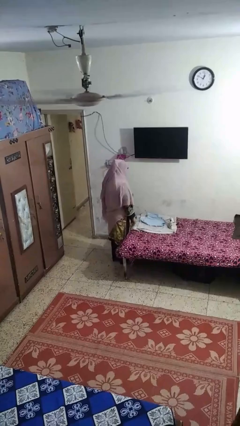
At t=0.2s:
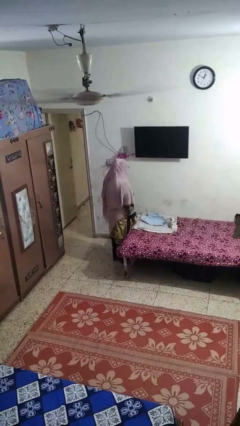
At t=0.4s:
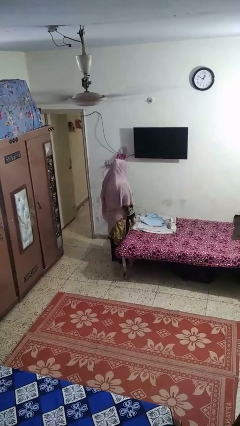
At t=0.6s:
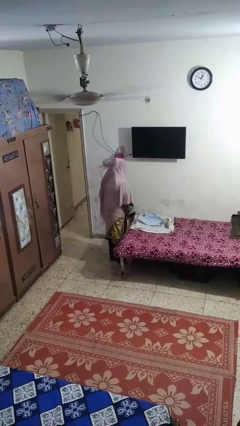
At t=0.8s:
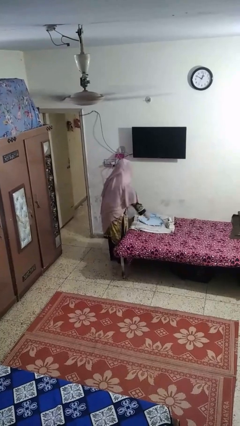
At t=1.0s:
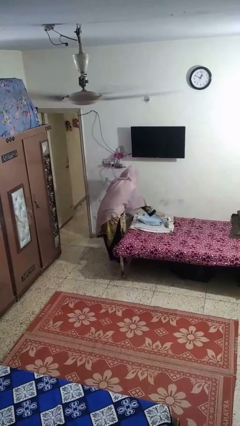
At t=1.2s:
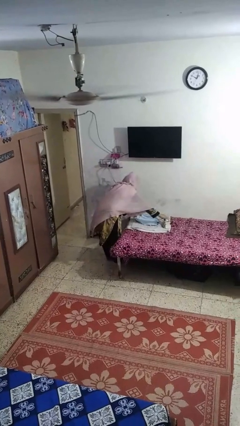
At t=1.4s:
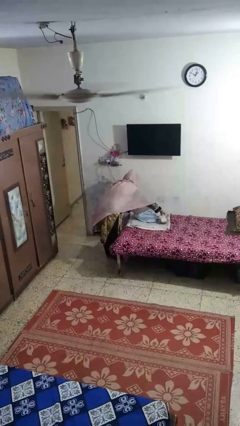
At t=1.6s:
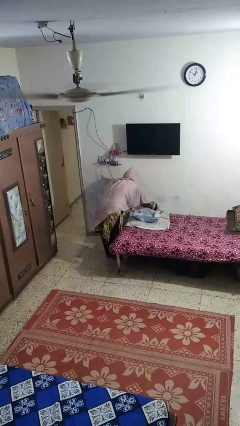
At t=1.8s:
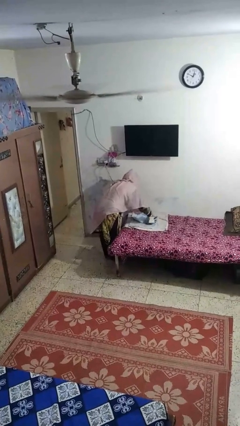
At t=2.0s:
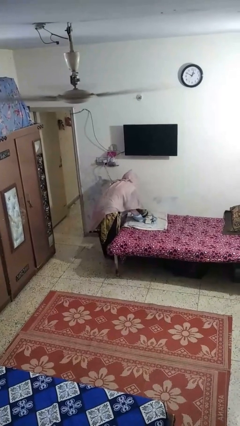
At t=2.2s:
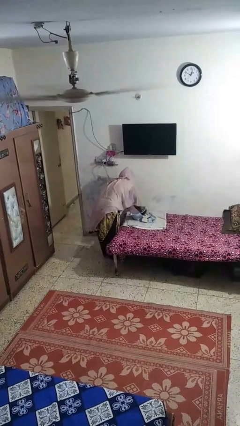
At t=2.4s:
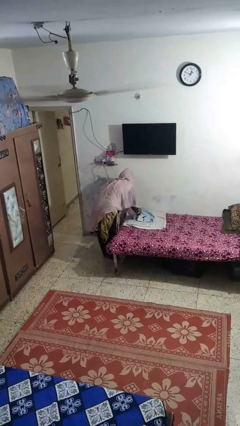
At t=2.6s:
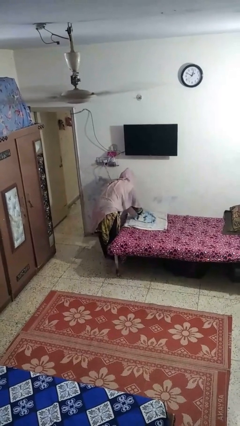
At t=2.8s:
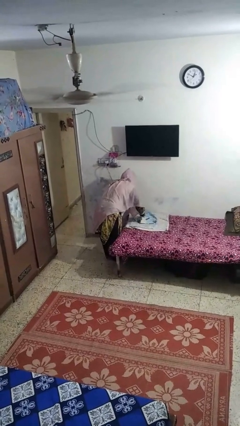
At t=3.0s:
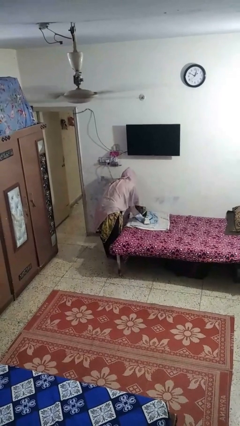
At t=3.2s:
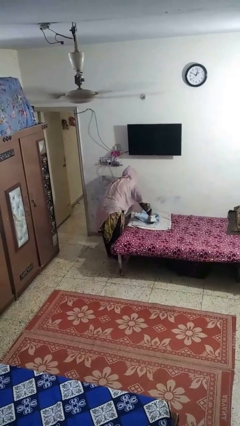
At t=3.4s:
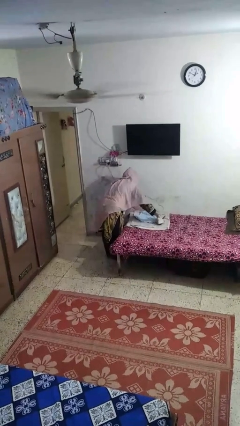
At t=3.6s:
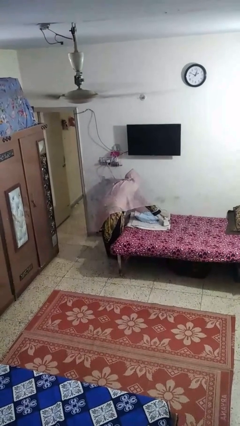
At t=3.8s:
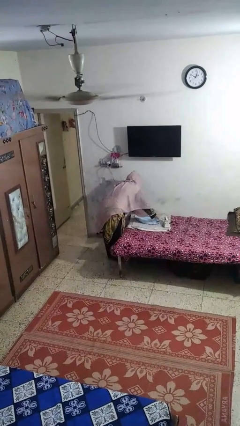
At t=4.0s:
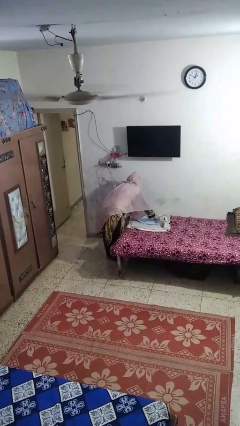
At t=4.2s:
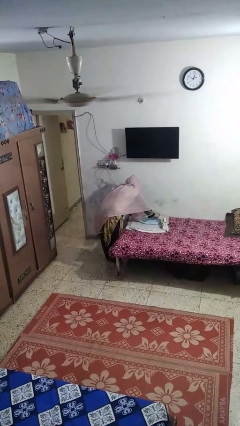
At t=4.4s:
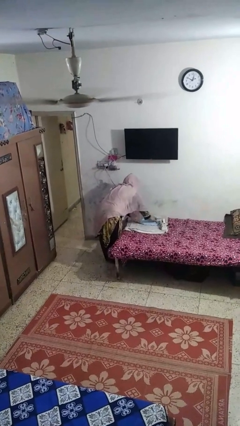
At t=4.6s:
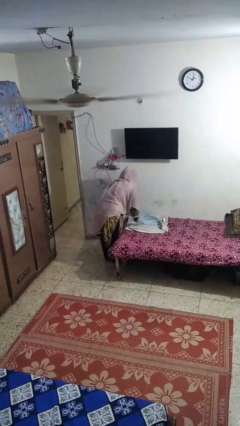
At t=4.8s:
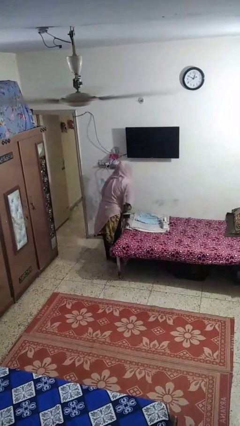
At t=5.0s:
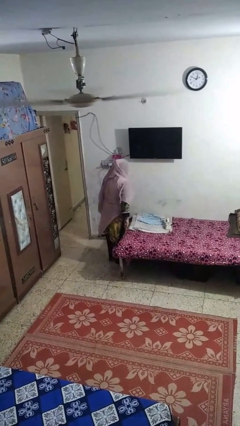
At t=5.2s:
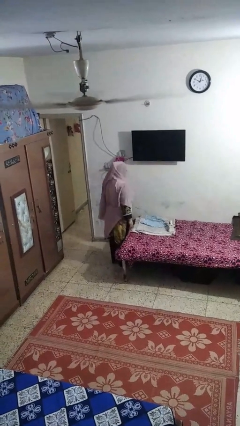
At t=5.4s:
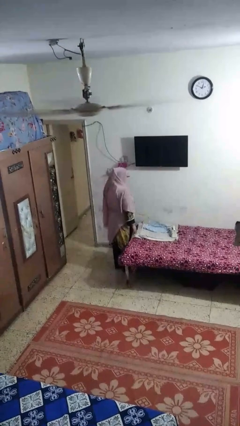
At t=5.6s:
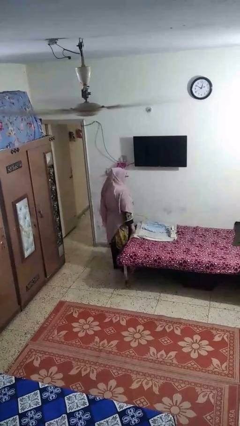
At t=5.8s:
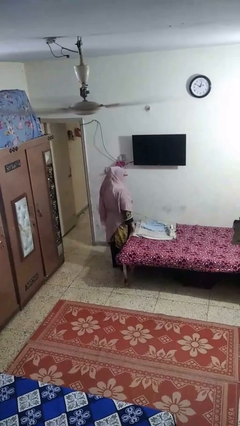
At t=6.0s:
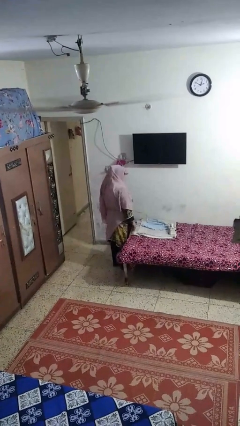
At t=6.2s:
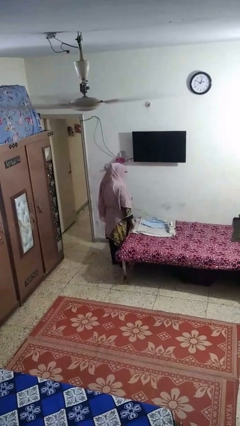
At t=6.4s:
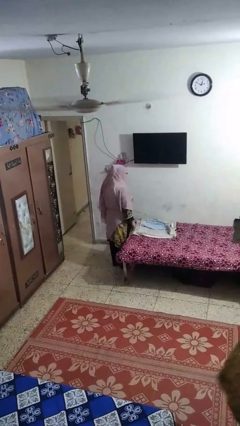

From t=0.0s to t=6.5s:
person irons clothes

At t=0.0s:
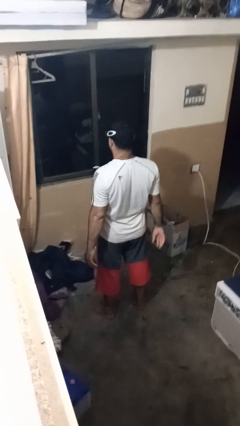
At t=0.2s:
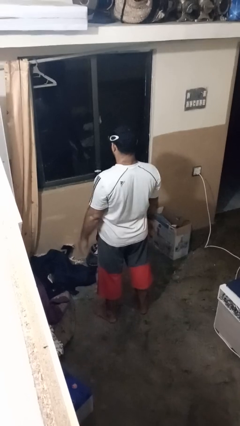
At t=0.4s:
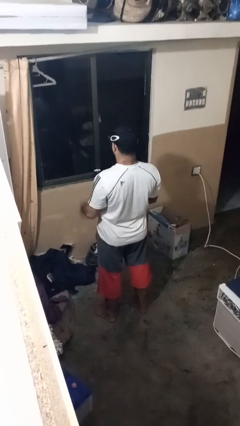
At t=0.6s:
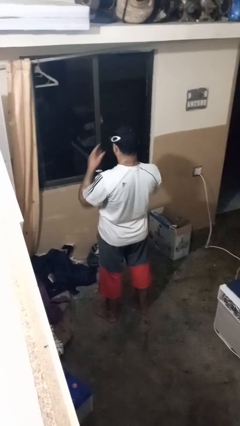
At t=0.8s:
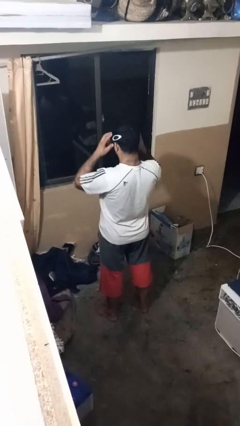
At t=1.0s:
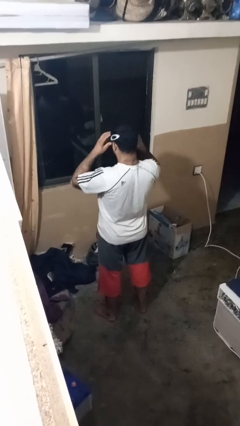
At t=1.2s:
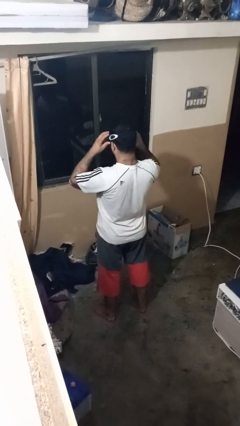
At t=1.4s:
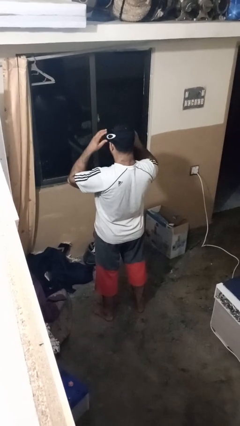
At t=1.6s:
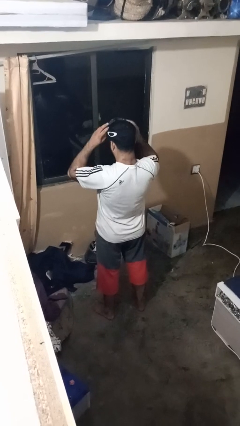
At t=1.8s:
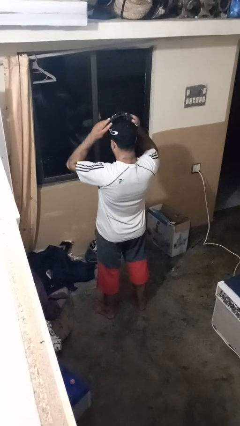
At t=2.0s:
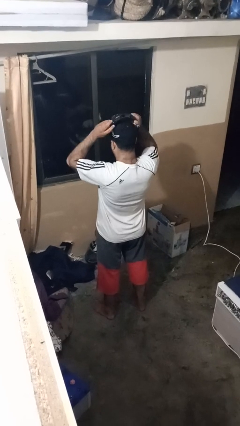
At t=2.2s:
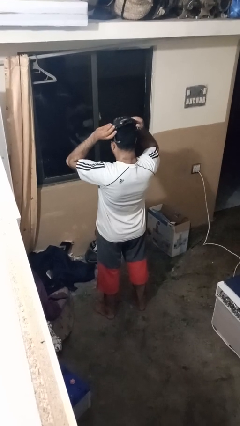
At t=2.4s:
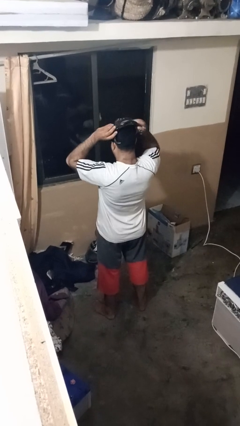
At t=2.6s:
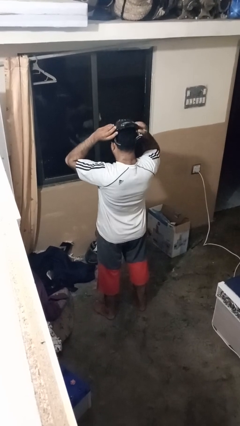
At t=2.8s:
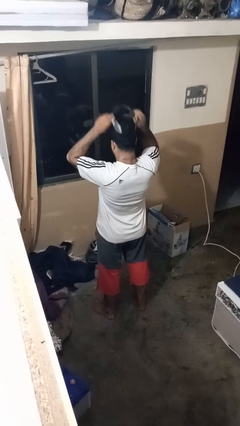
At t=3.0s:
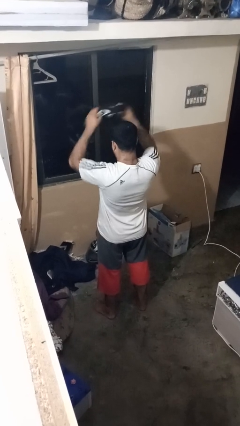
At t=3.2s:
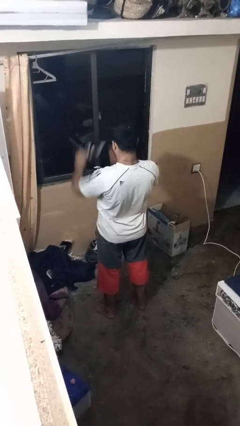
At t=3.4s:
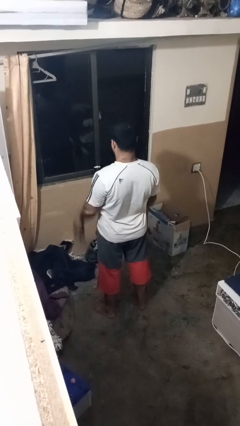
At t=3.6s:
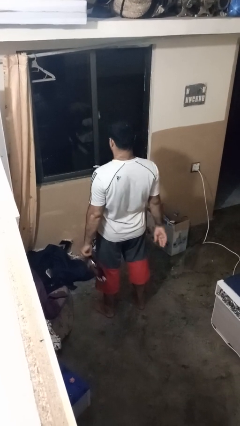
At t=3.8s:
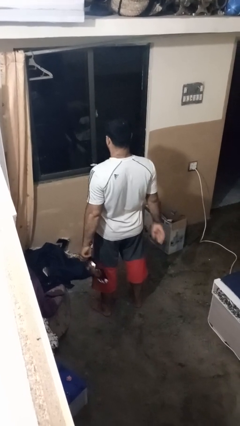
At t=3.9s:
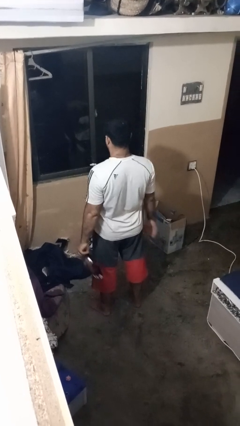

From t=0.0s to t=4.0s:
person takes off sunglasses

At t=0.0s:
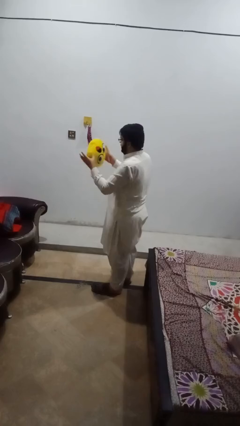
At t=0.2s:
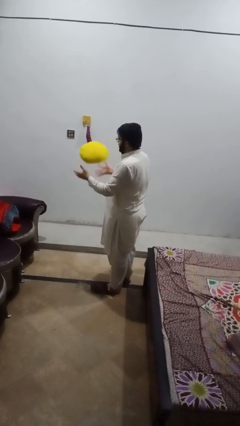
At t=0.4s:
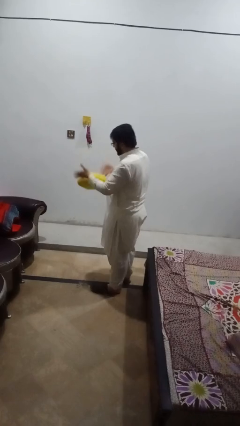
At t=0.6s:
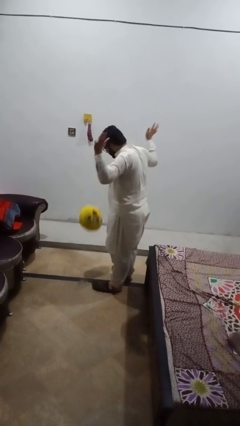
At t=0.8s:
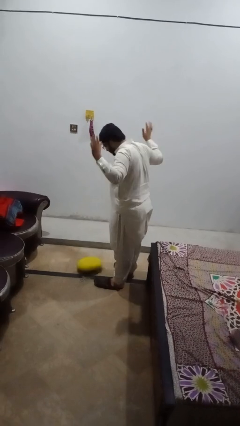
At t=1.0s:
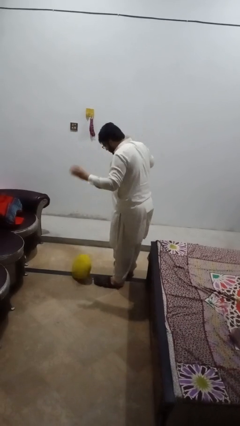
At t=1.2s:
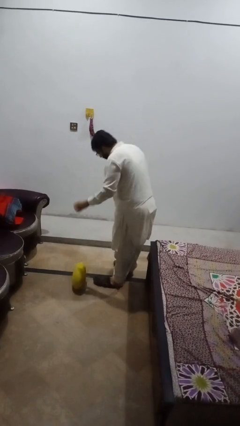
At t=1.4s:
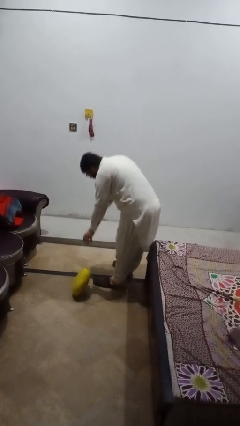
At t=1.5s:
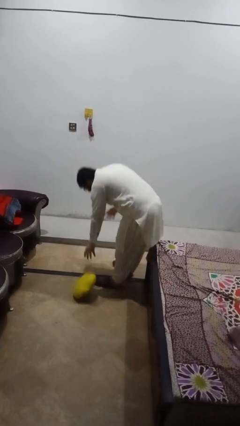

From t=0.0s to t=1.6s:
person drops object

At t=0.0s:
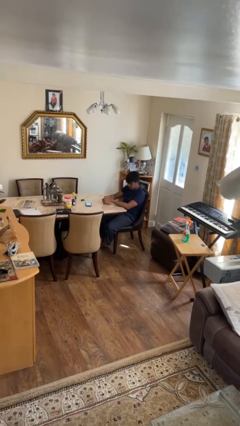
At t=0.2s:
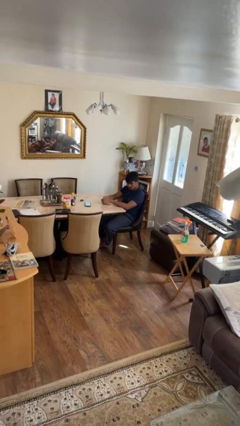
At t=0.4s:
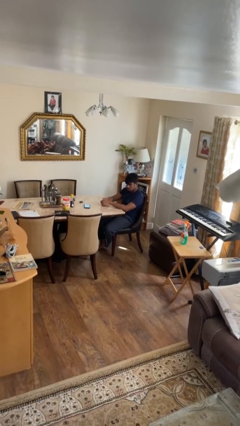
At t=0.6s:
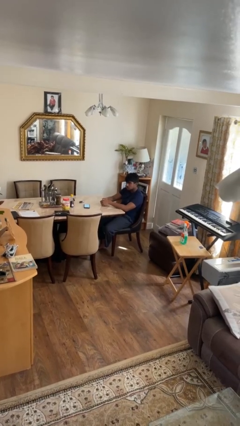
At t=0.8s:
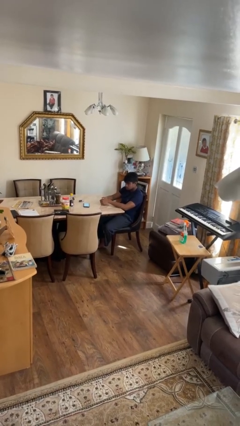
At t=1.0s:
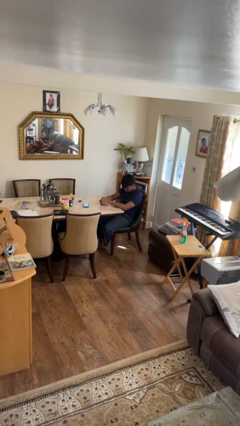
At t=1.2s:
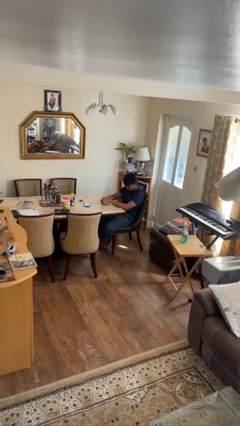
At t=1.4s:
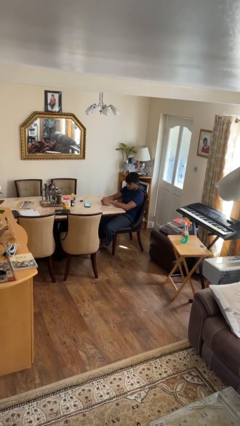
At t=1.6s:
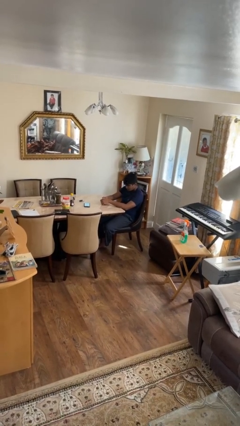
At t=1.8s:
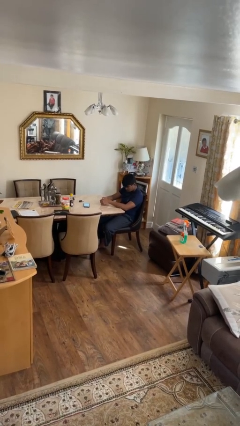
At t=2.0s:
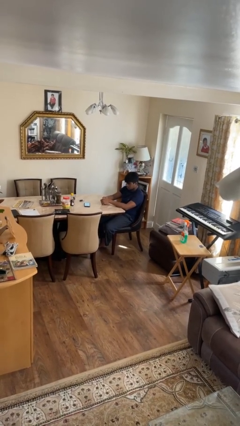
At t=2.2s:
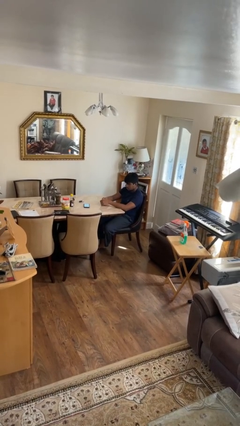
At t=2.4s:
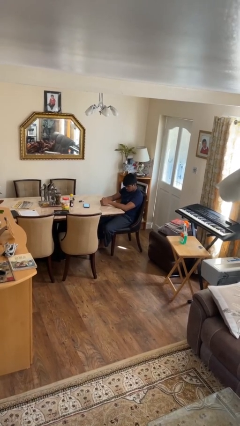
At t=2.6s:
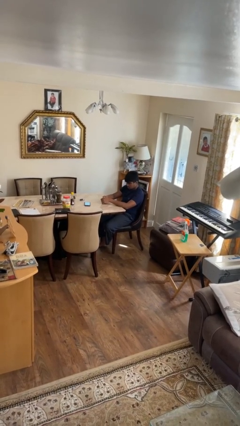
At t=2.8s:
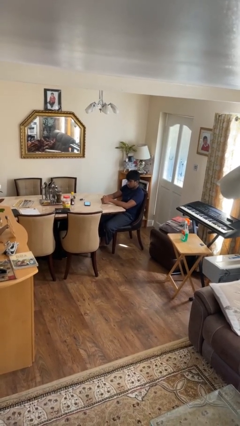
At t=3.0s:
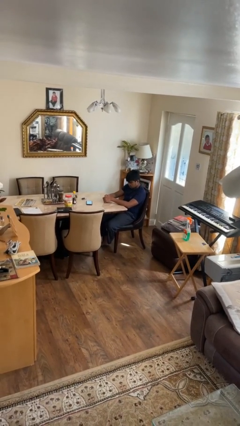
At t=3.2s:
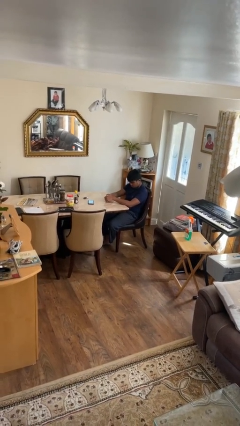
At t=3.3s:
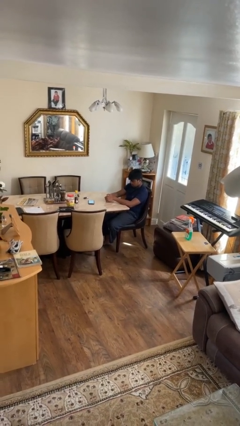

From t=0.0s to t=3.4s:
person nods head

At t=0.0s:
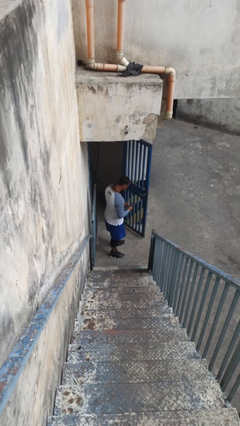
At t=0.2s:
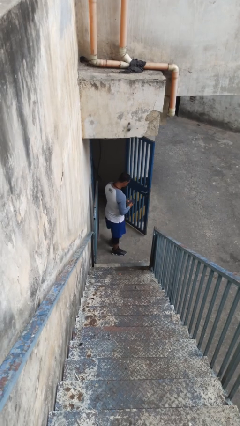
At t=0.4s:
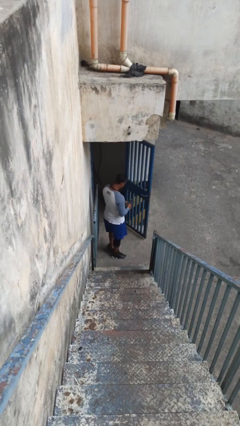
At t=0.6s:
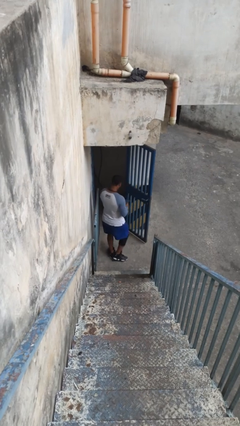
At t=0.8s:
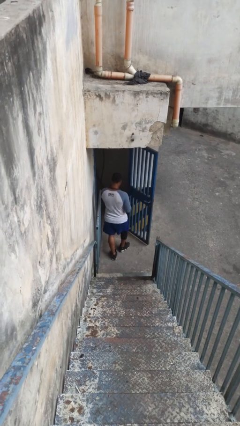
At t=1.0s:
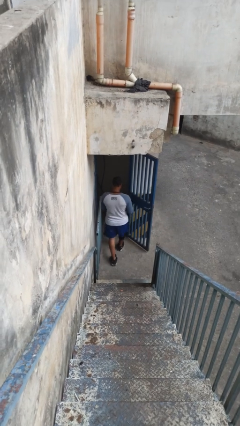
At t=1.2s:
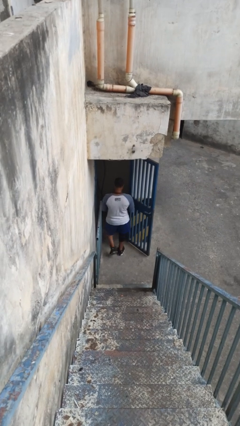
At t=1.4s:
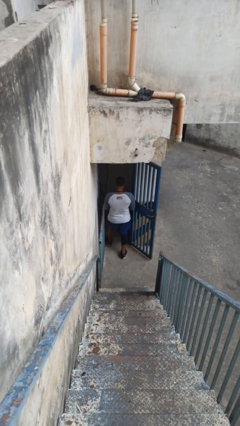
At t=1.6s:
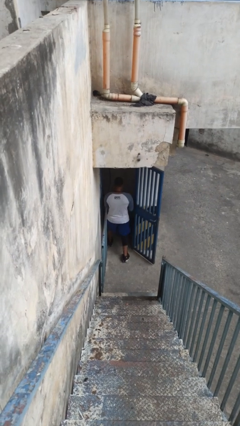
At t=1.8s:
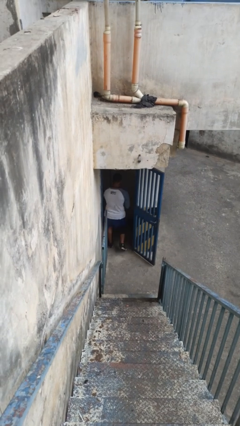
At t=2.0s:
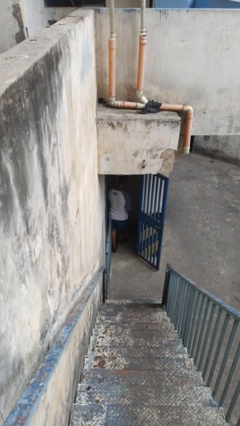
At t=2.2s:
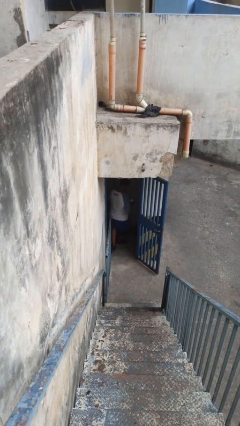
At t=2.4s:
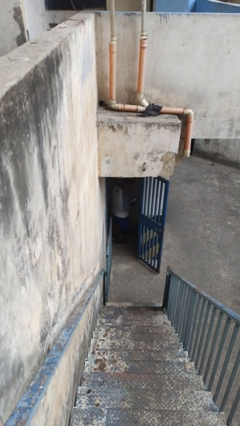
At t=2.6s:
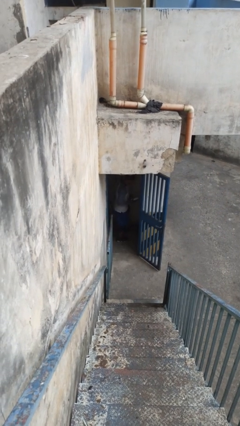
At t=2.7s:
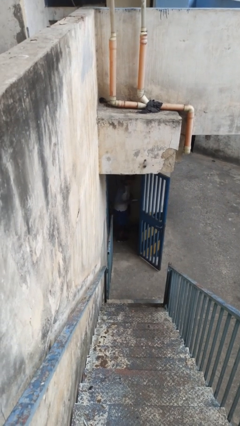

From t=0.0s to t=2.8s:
person exits scene through structure
